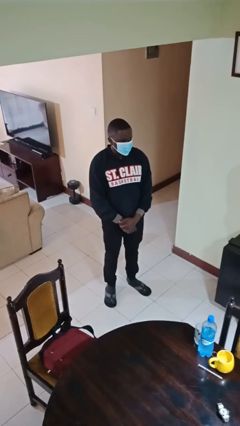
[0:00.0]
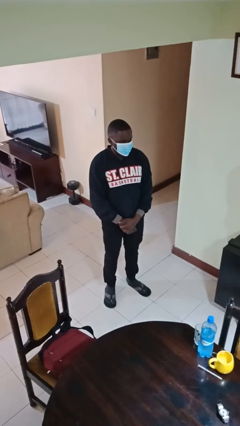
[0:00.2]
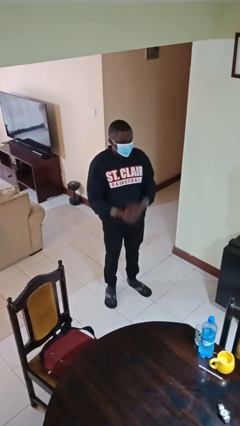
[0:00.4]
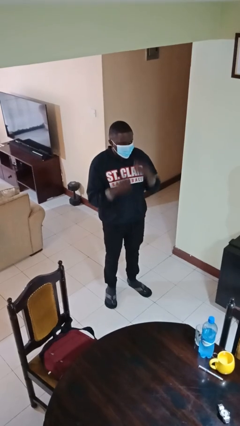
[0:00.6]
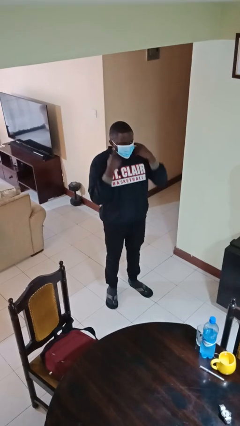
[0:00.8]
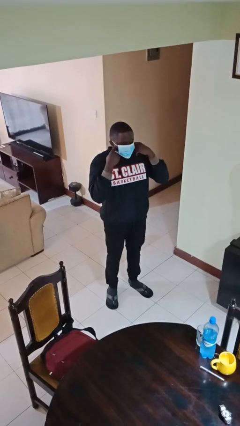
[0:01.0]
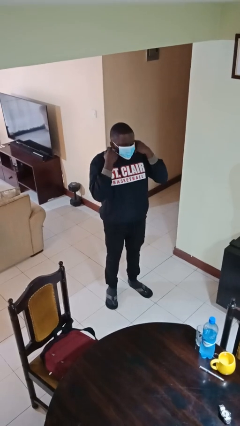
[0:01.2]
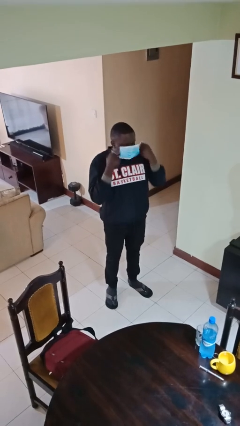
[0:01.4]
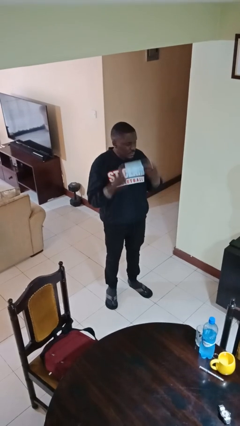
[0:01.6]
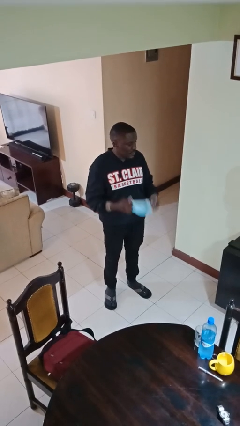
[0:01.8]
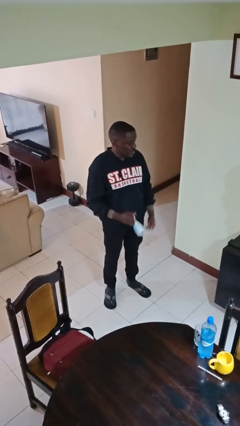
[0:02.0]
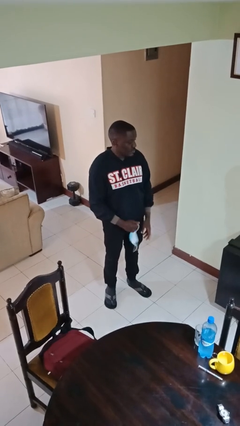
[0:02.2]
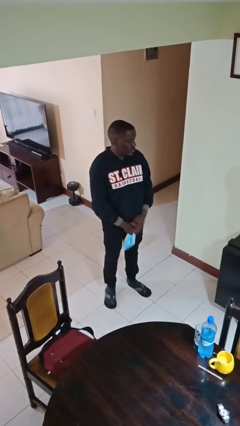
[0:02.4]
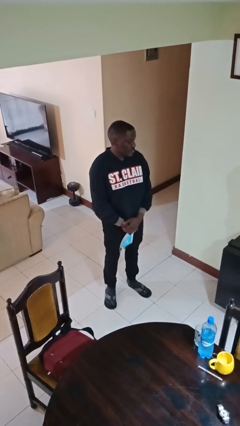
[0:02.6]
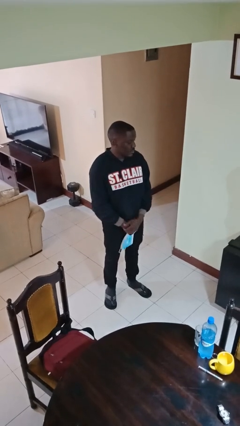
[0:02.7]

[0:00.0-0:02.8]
person takes off facemask

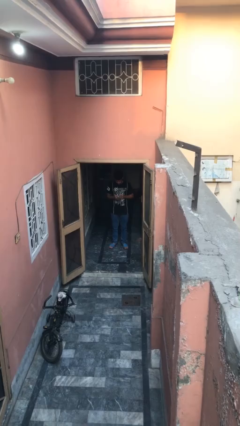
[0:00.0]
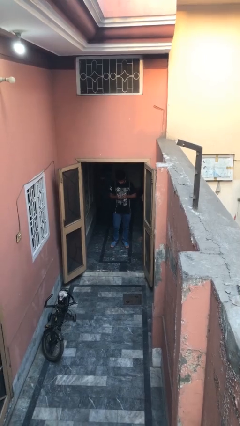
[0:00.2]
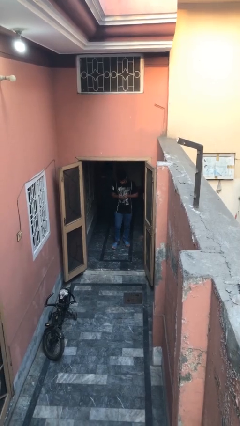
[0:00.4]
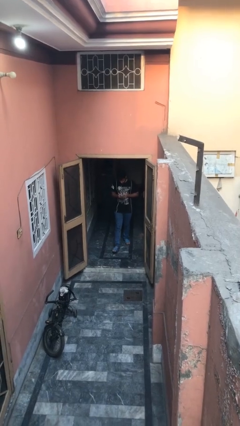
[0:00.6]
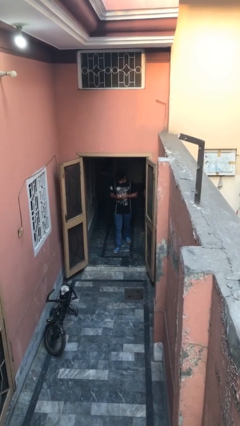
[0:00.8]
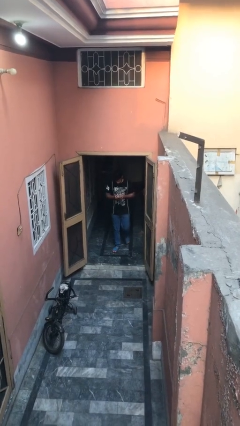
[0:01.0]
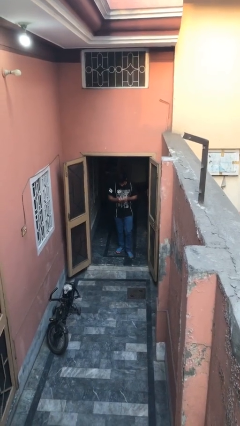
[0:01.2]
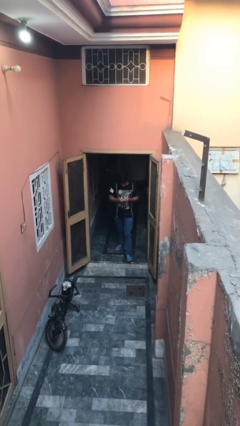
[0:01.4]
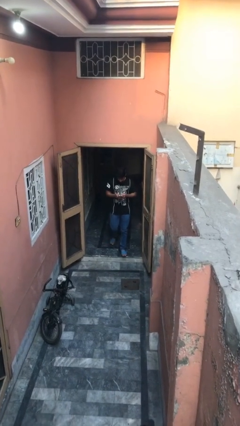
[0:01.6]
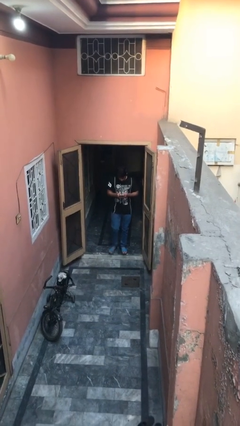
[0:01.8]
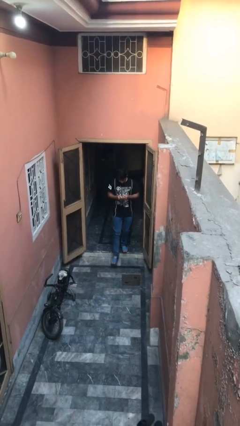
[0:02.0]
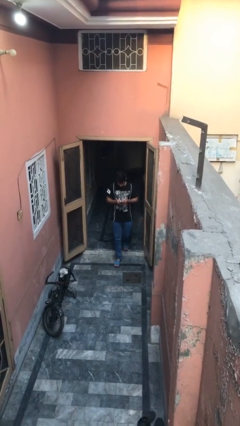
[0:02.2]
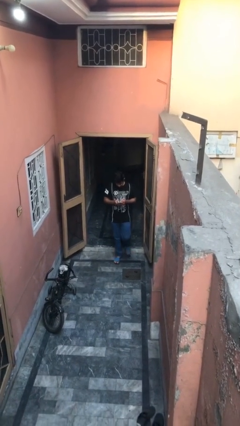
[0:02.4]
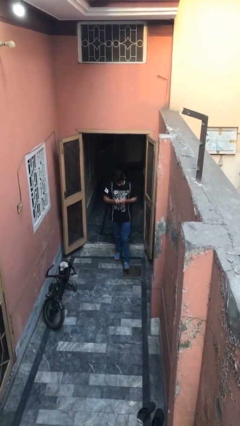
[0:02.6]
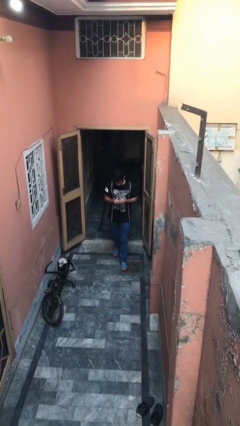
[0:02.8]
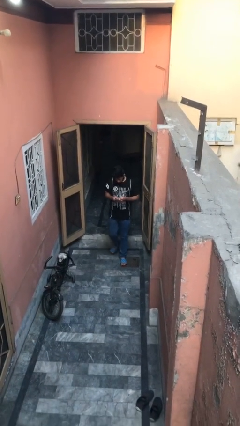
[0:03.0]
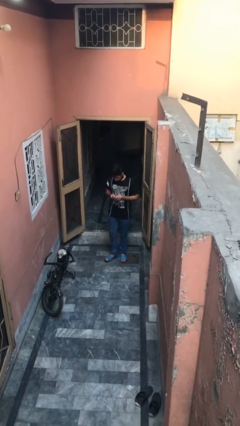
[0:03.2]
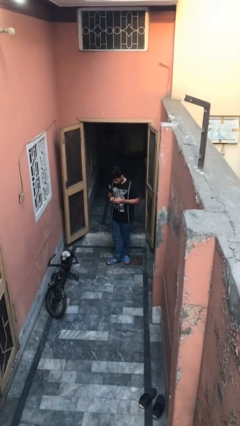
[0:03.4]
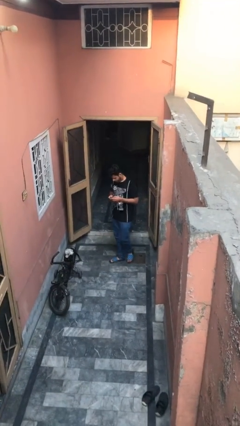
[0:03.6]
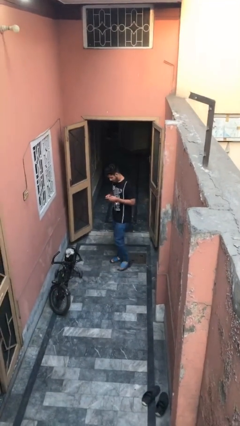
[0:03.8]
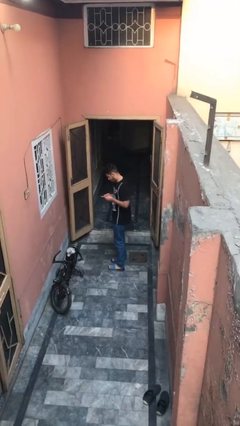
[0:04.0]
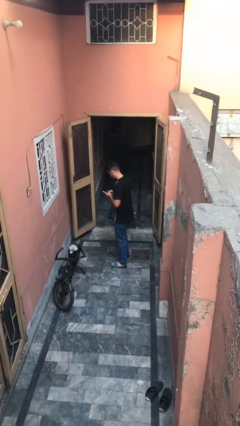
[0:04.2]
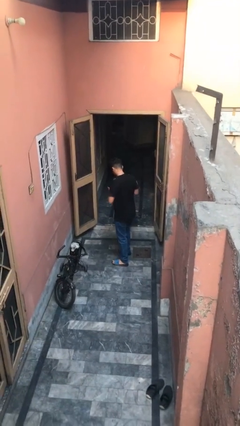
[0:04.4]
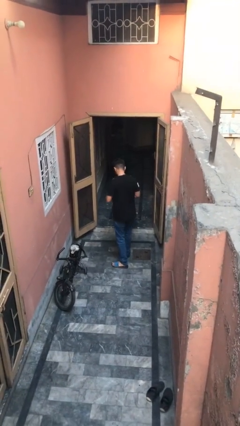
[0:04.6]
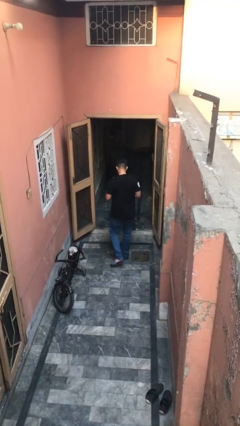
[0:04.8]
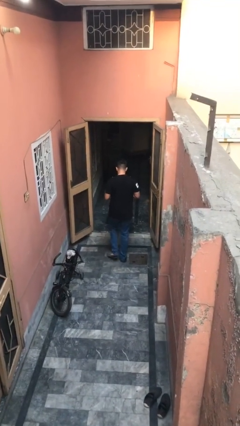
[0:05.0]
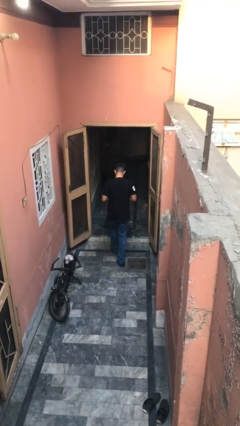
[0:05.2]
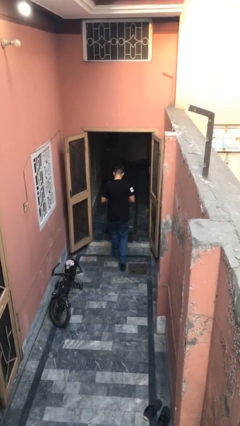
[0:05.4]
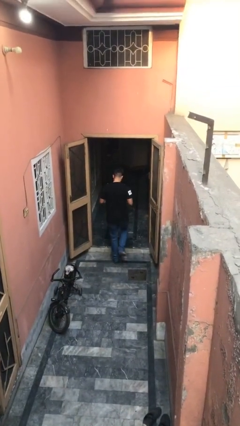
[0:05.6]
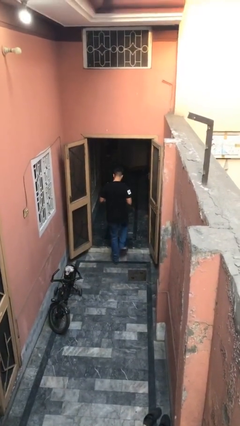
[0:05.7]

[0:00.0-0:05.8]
person enters scene through structure

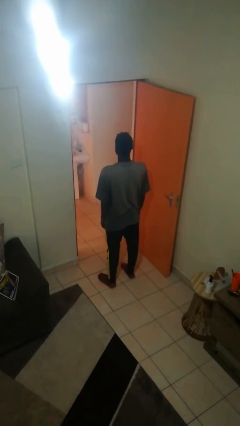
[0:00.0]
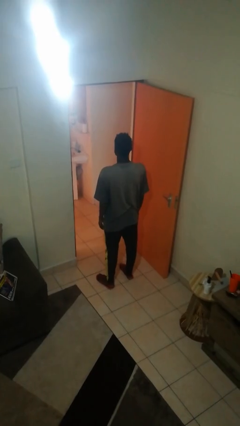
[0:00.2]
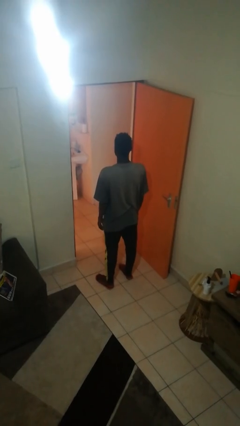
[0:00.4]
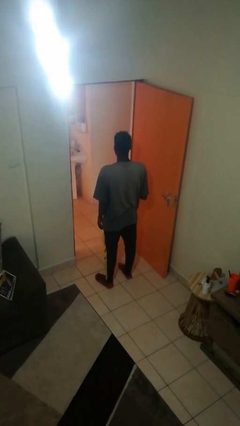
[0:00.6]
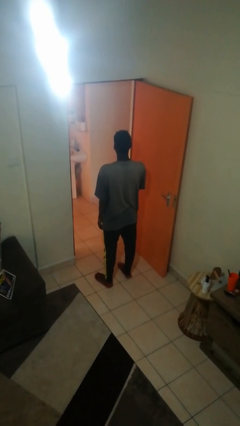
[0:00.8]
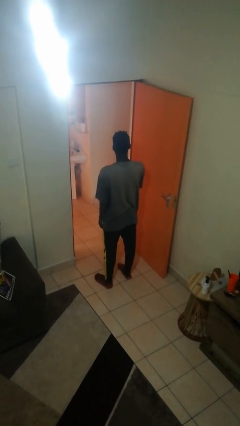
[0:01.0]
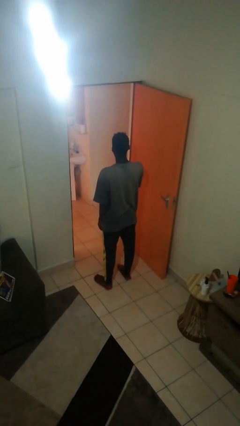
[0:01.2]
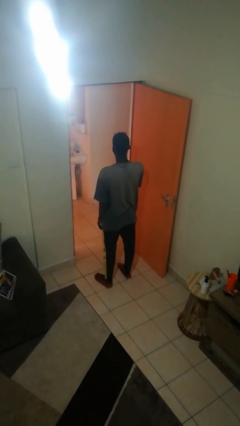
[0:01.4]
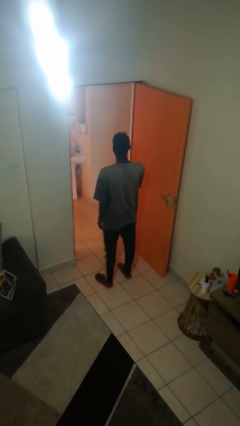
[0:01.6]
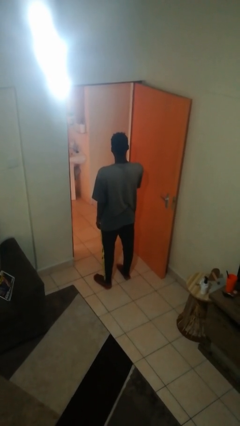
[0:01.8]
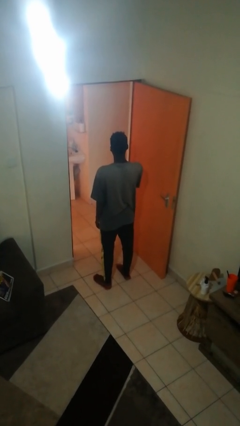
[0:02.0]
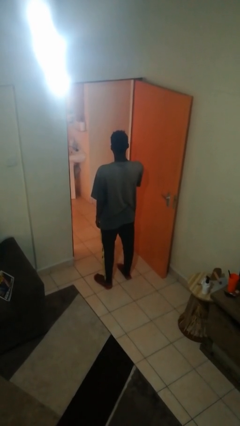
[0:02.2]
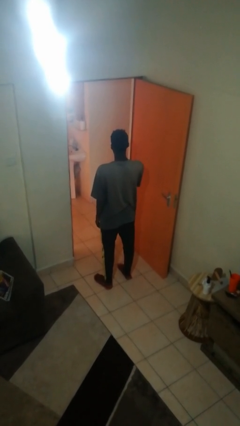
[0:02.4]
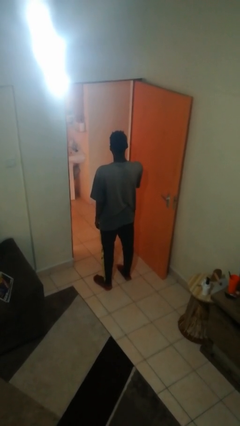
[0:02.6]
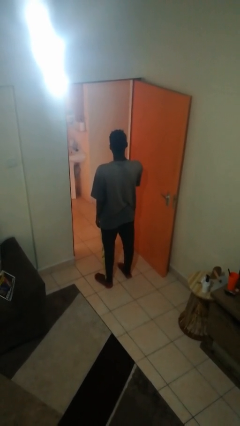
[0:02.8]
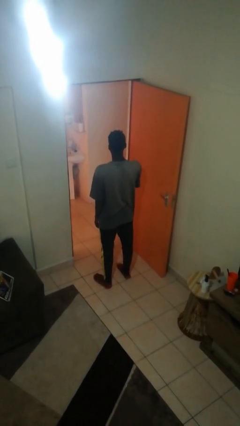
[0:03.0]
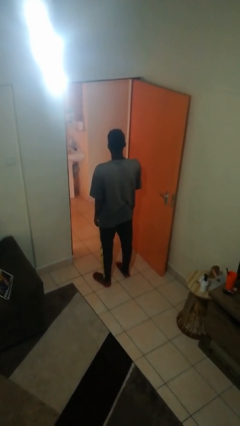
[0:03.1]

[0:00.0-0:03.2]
person brushes teeth

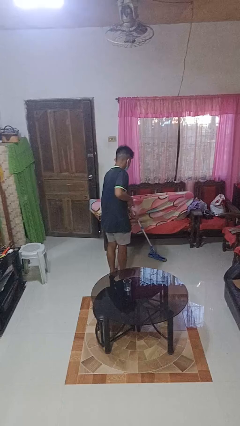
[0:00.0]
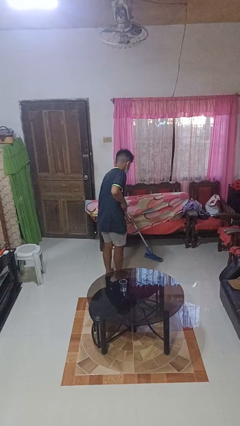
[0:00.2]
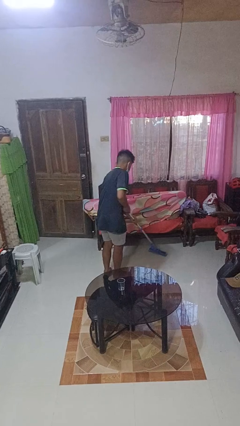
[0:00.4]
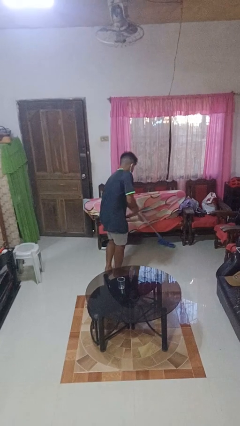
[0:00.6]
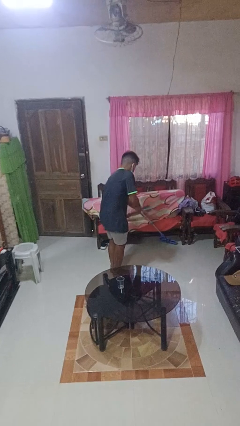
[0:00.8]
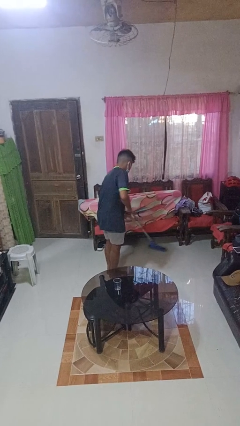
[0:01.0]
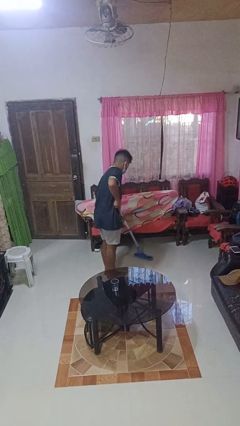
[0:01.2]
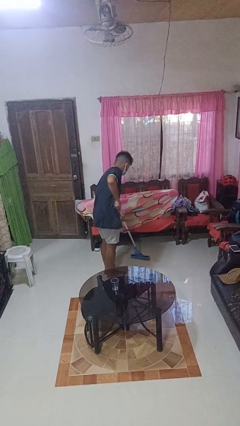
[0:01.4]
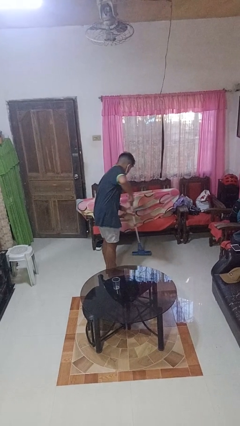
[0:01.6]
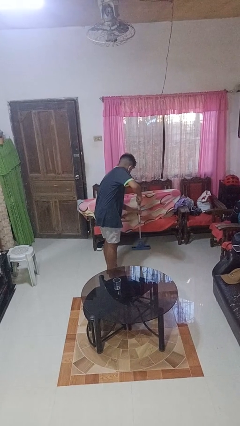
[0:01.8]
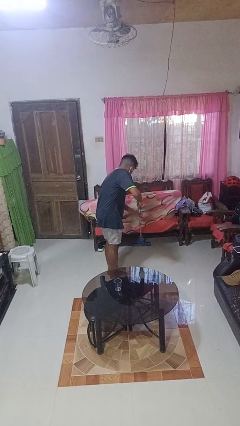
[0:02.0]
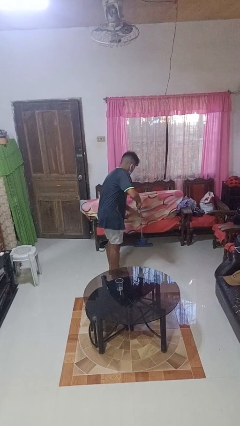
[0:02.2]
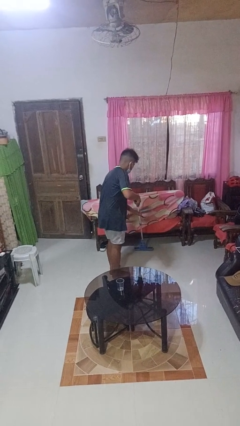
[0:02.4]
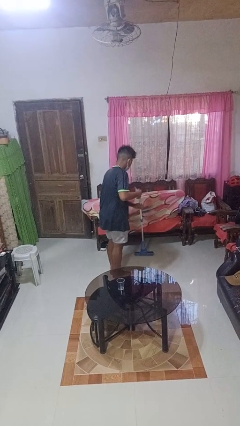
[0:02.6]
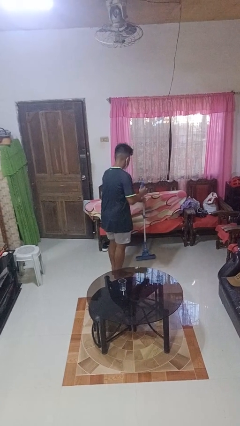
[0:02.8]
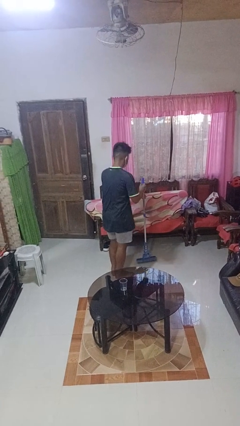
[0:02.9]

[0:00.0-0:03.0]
person mops

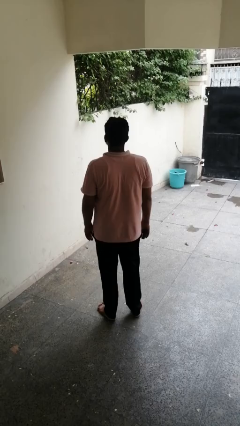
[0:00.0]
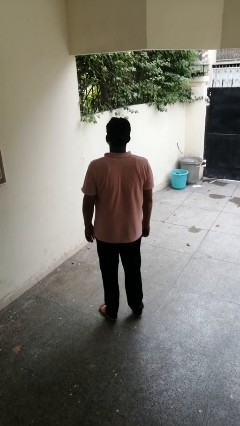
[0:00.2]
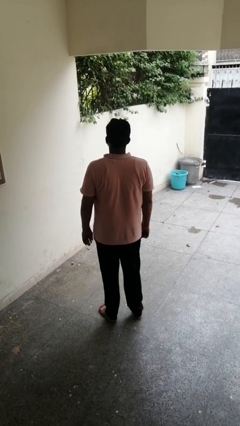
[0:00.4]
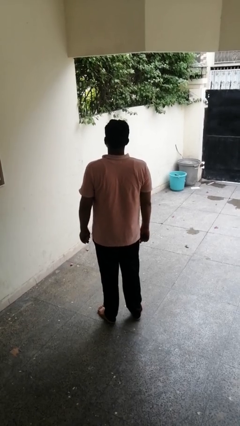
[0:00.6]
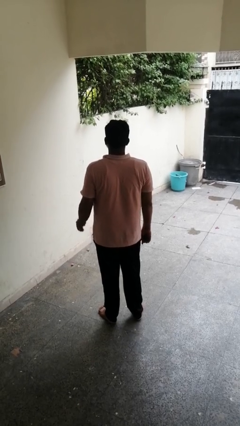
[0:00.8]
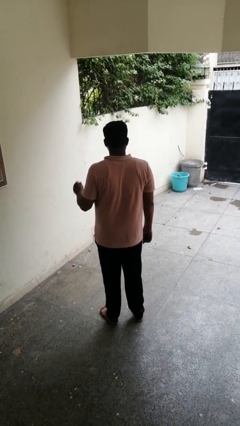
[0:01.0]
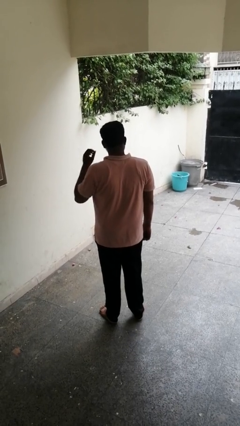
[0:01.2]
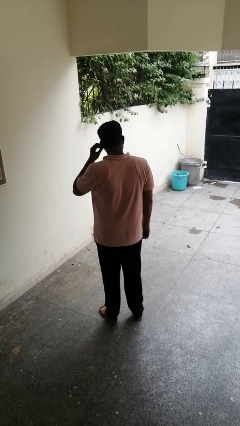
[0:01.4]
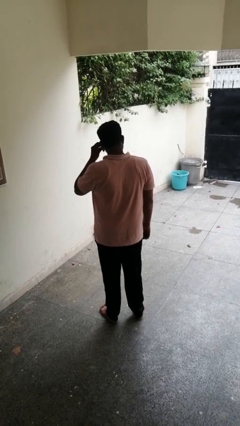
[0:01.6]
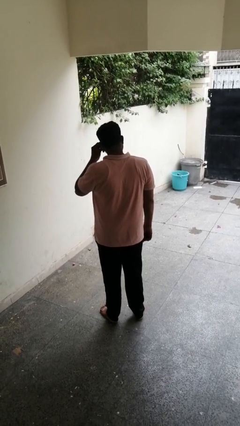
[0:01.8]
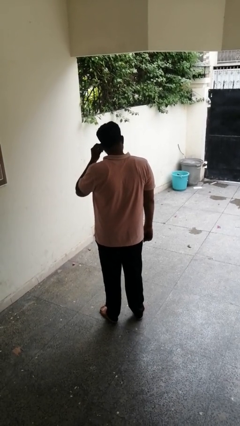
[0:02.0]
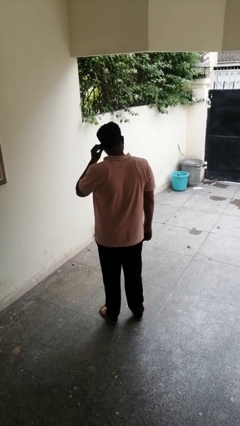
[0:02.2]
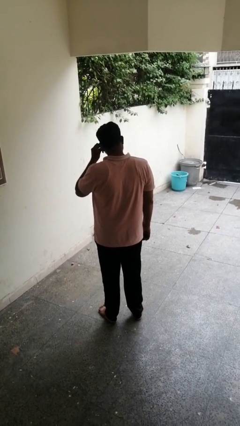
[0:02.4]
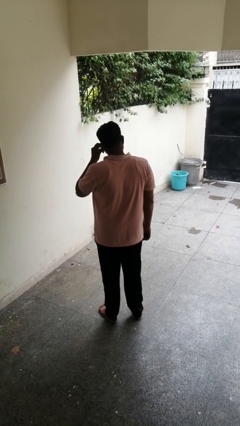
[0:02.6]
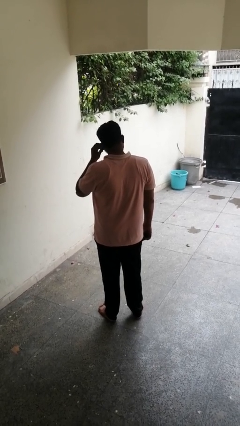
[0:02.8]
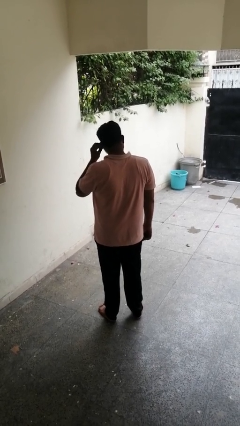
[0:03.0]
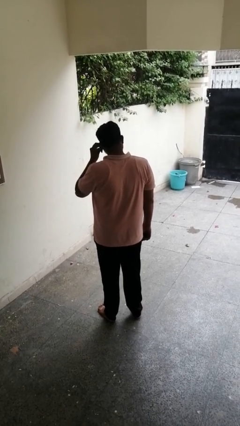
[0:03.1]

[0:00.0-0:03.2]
person touches earlobe
